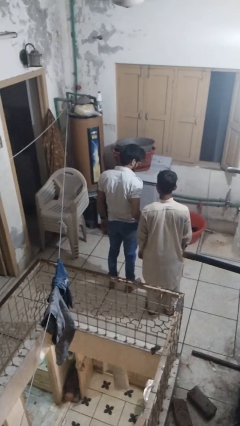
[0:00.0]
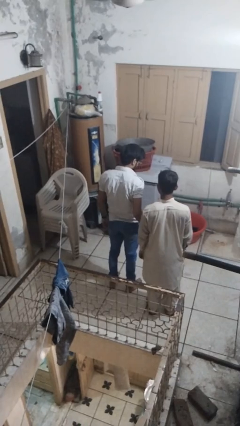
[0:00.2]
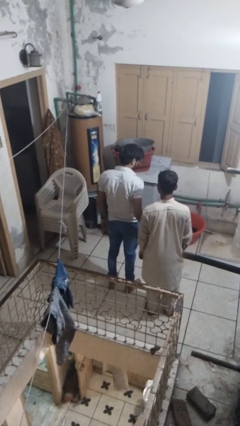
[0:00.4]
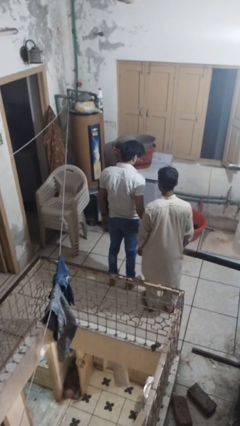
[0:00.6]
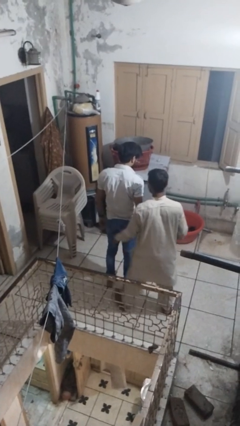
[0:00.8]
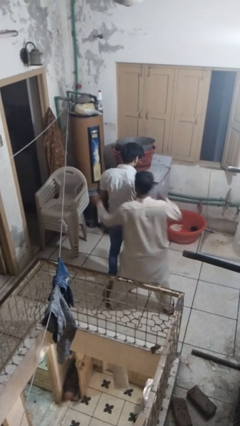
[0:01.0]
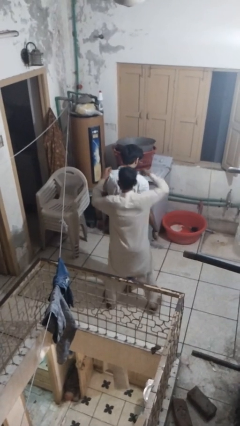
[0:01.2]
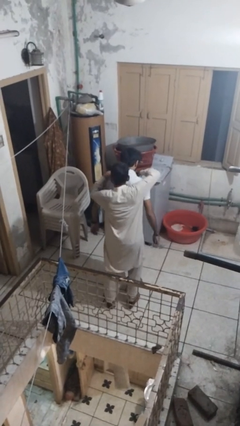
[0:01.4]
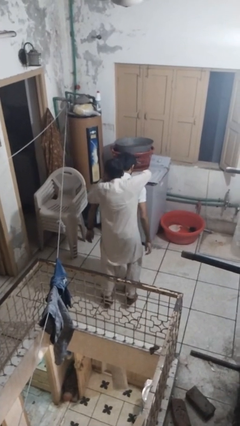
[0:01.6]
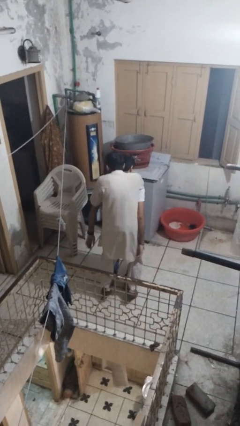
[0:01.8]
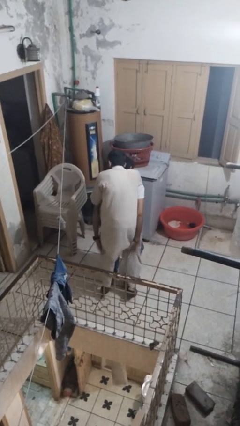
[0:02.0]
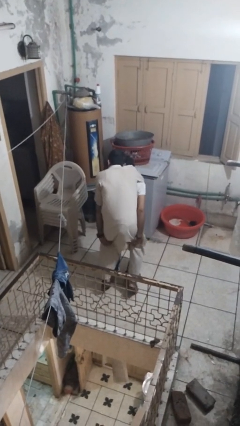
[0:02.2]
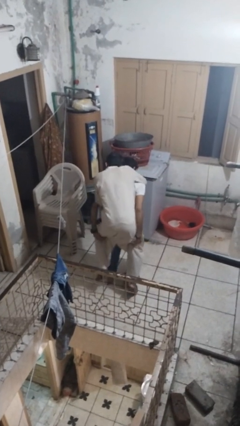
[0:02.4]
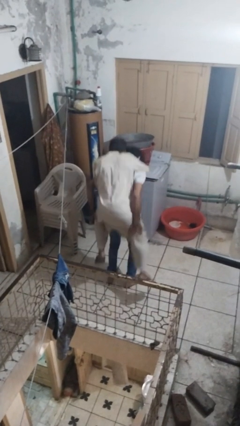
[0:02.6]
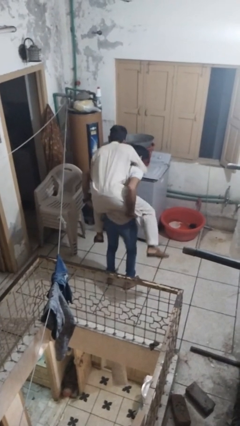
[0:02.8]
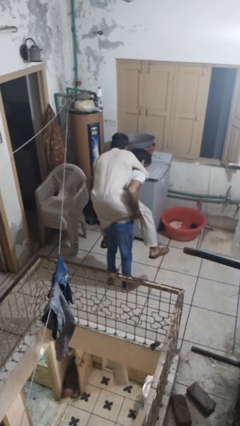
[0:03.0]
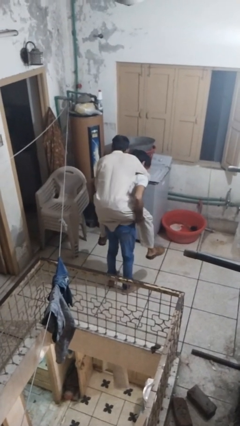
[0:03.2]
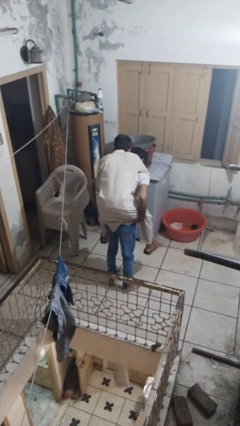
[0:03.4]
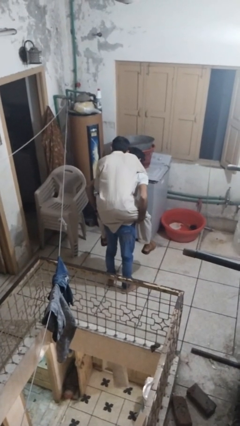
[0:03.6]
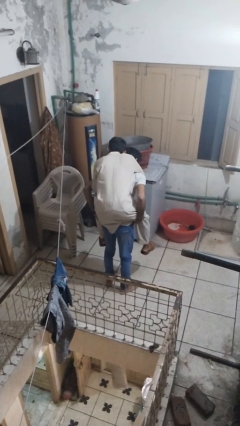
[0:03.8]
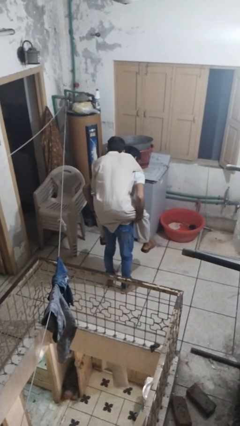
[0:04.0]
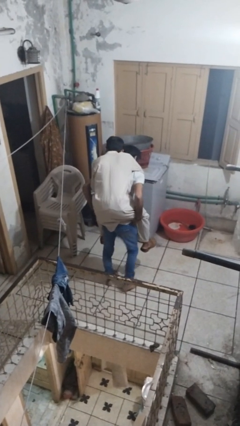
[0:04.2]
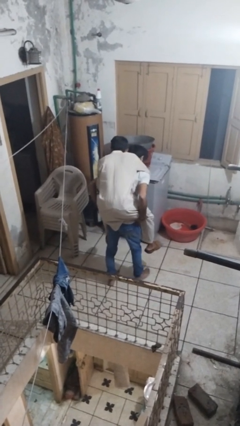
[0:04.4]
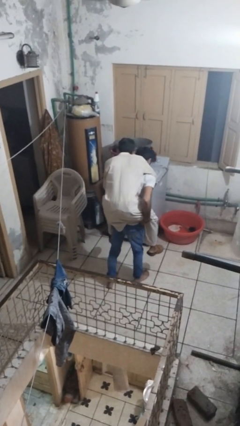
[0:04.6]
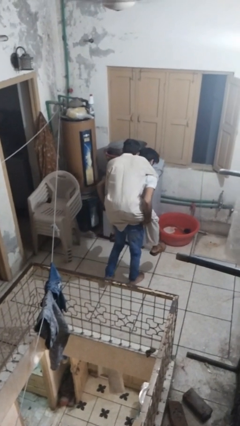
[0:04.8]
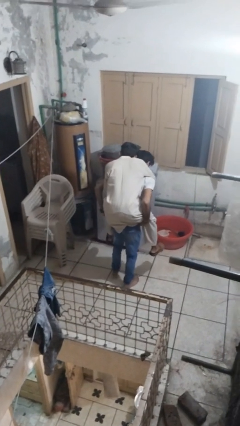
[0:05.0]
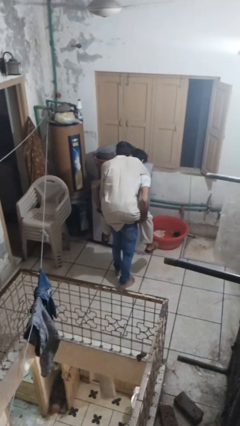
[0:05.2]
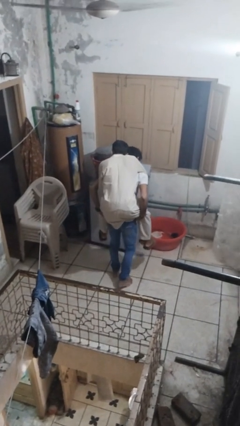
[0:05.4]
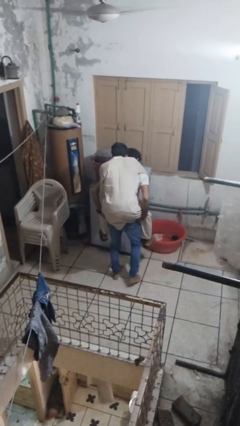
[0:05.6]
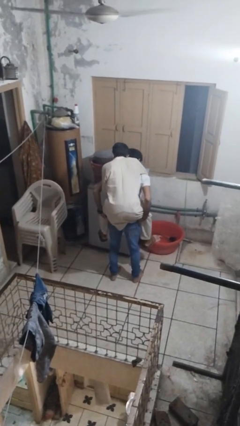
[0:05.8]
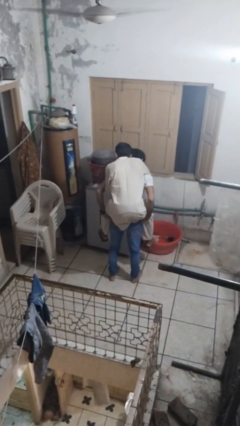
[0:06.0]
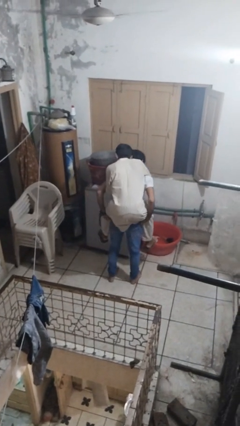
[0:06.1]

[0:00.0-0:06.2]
person carries person on back

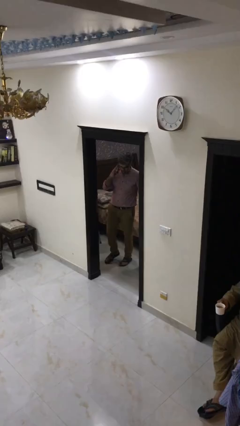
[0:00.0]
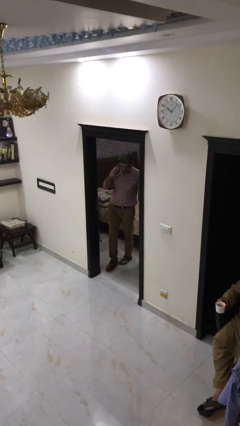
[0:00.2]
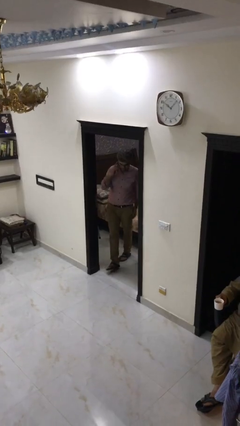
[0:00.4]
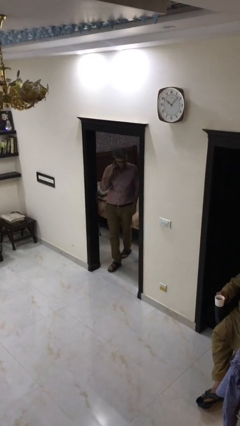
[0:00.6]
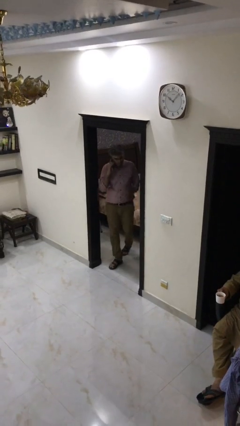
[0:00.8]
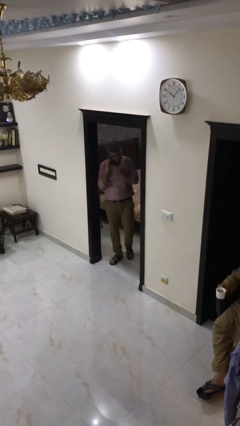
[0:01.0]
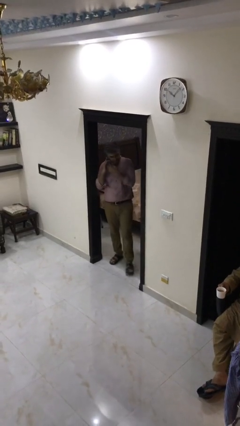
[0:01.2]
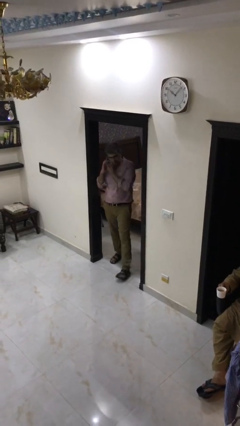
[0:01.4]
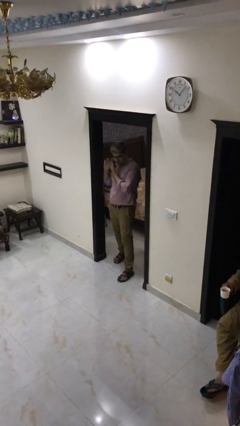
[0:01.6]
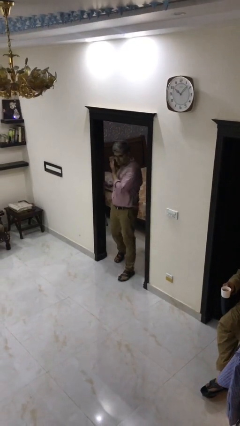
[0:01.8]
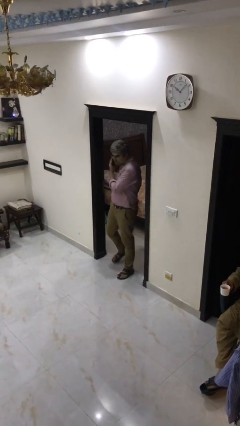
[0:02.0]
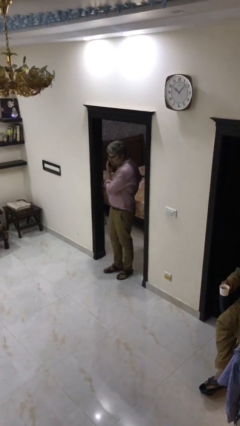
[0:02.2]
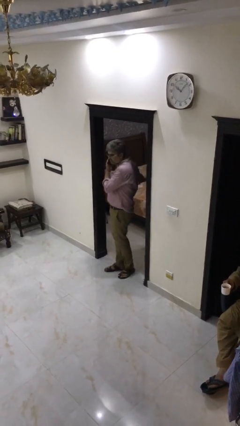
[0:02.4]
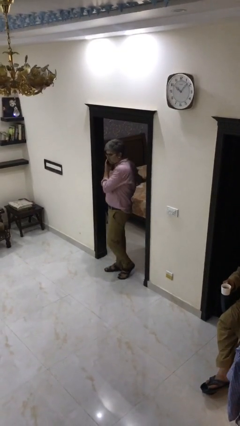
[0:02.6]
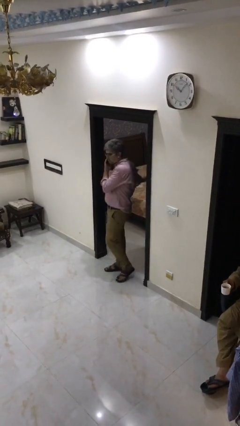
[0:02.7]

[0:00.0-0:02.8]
person enters scene through structure

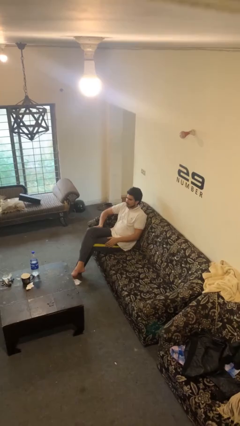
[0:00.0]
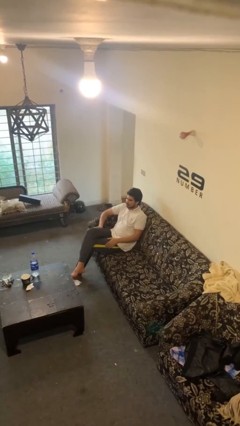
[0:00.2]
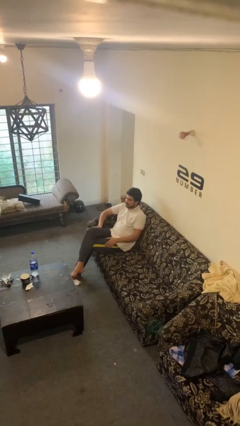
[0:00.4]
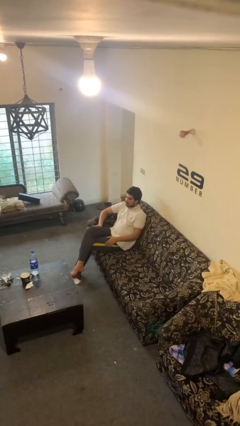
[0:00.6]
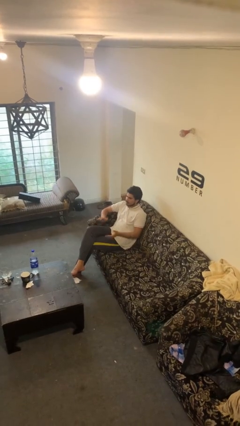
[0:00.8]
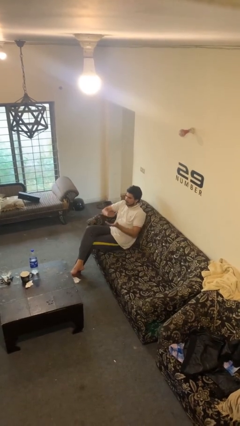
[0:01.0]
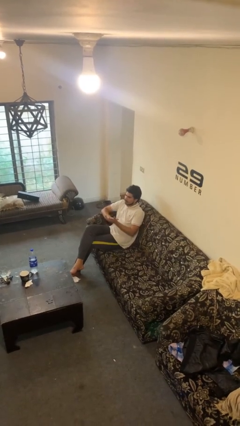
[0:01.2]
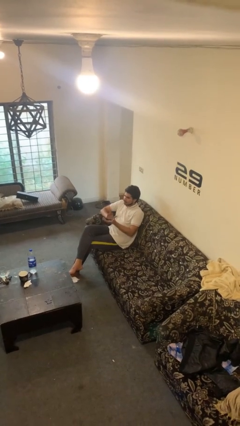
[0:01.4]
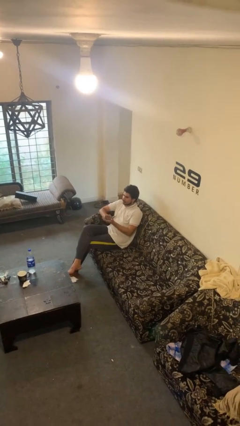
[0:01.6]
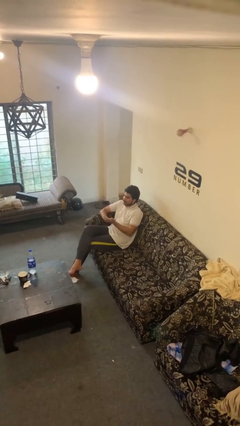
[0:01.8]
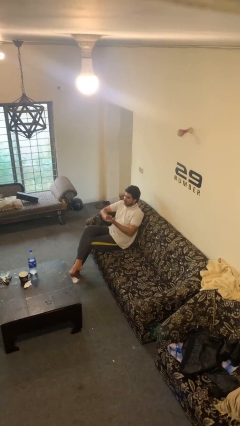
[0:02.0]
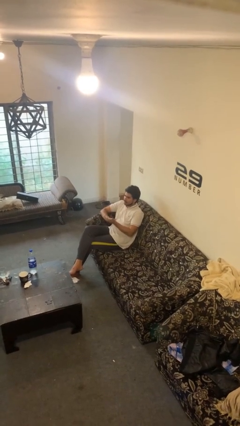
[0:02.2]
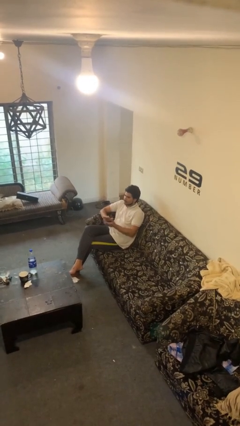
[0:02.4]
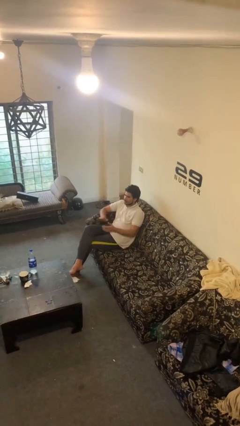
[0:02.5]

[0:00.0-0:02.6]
person claps hands

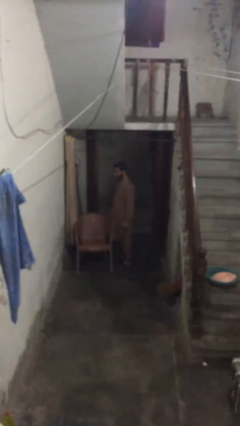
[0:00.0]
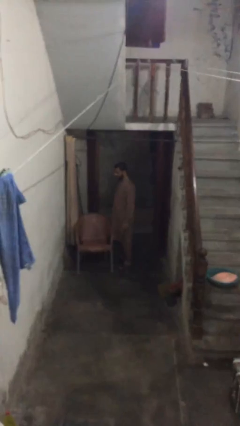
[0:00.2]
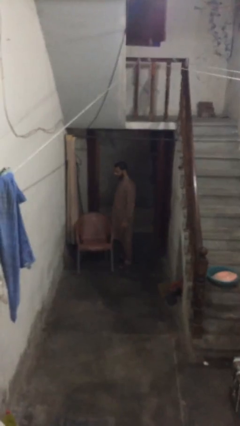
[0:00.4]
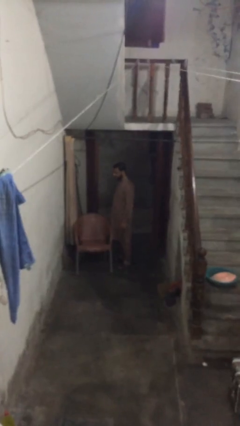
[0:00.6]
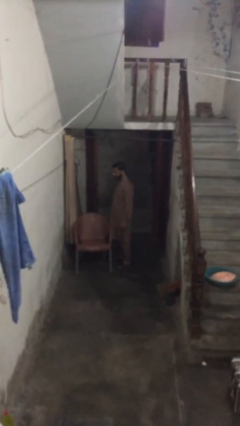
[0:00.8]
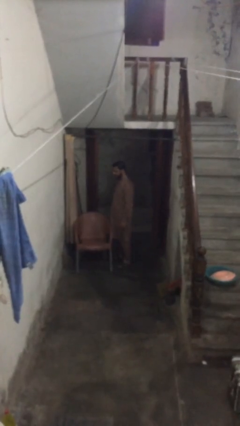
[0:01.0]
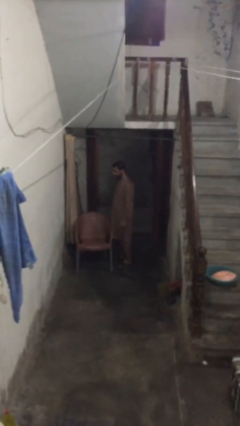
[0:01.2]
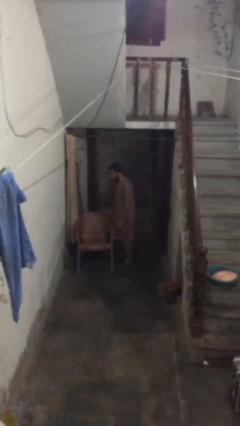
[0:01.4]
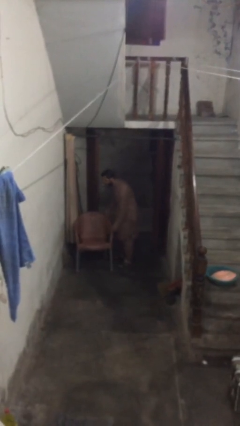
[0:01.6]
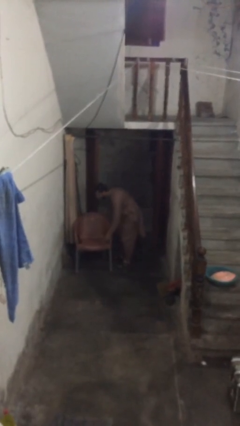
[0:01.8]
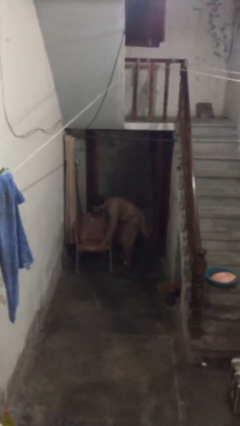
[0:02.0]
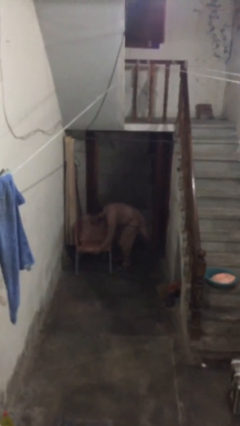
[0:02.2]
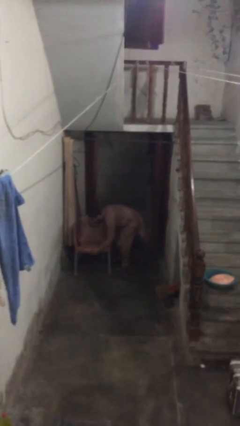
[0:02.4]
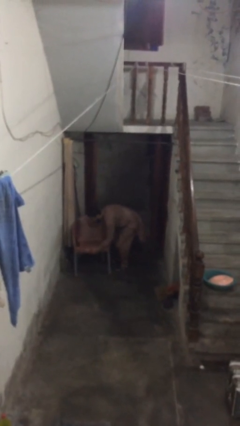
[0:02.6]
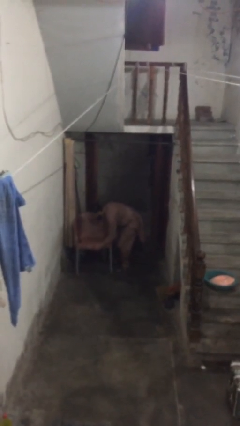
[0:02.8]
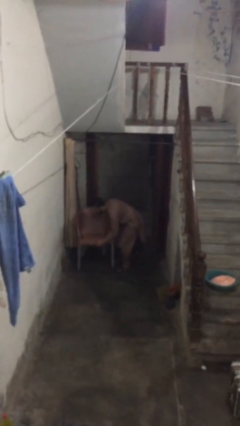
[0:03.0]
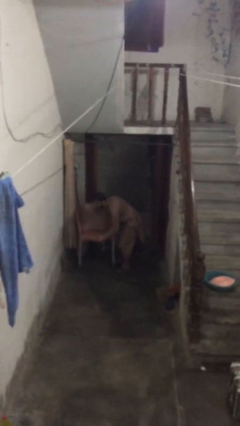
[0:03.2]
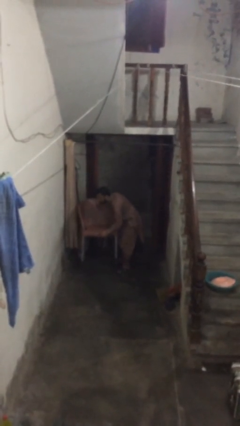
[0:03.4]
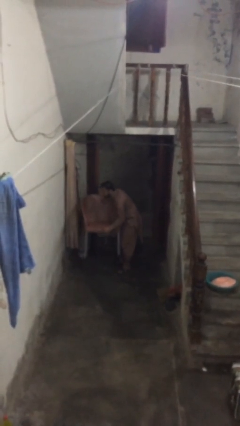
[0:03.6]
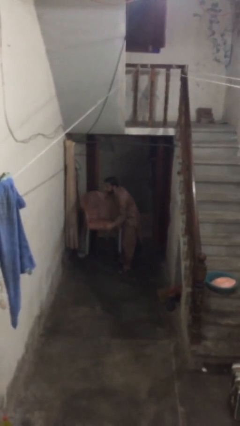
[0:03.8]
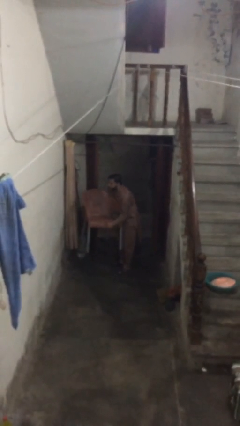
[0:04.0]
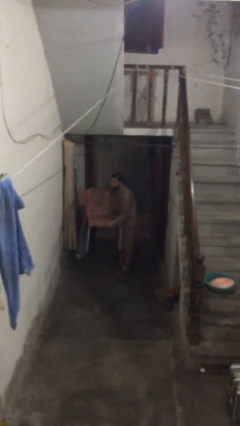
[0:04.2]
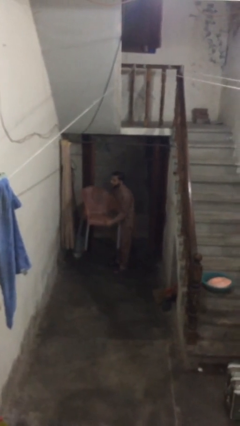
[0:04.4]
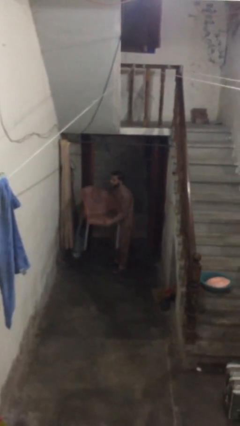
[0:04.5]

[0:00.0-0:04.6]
person picks up object from floor

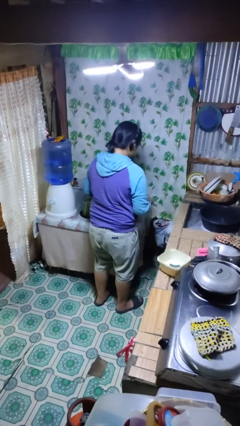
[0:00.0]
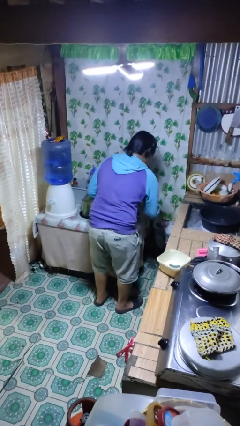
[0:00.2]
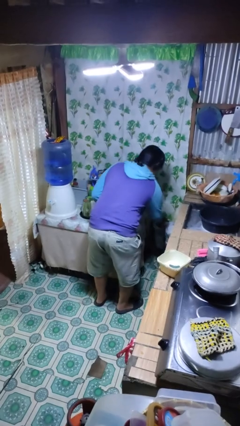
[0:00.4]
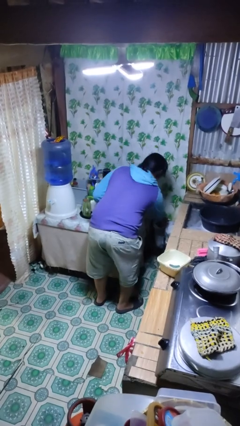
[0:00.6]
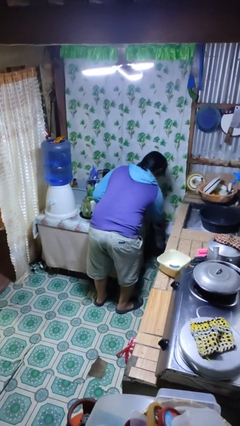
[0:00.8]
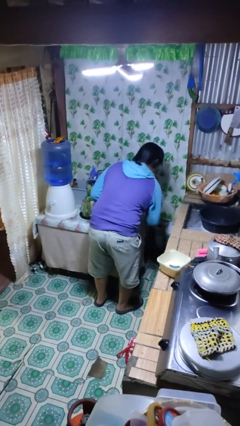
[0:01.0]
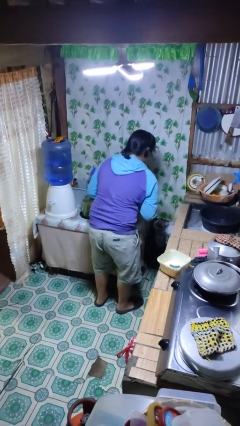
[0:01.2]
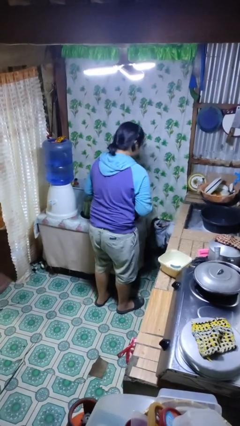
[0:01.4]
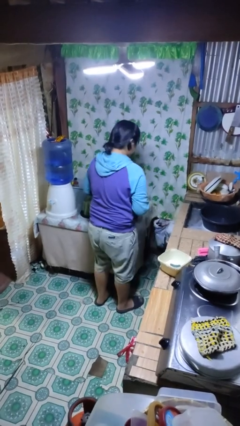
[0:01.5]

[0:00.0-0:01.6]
person discards trash

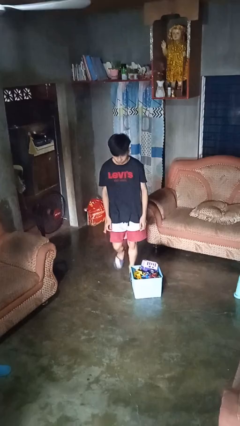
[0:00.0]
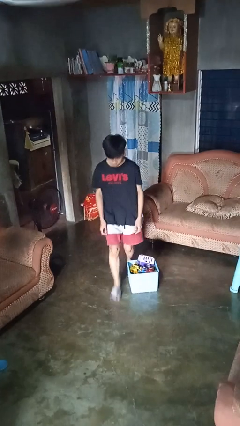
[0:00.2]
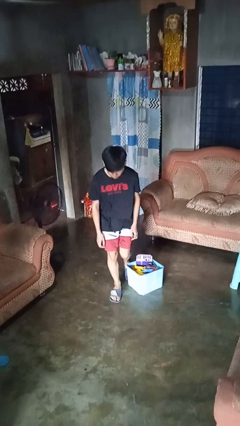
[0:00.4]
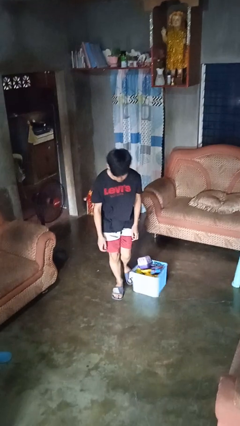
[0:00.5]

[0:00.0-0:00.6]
person trips on object on floor
